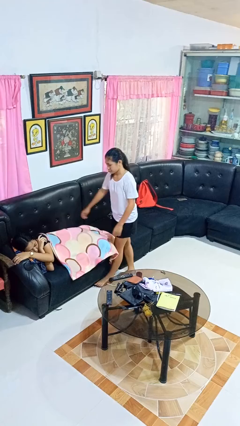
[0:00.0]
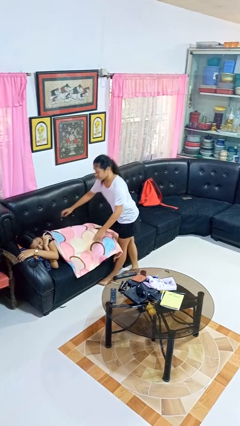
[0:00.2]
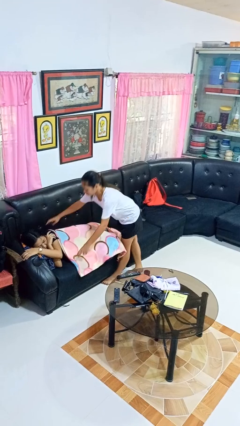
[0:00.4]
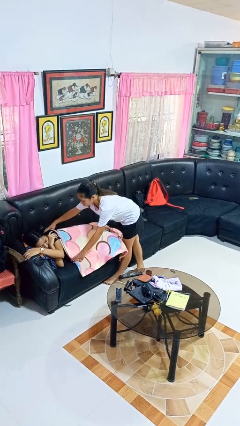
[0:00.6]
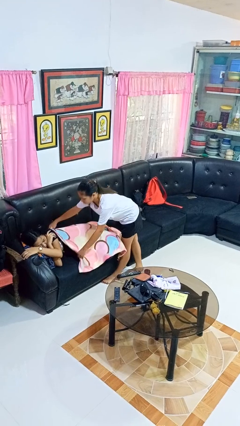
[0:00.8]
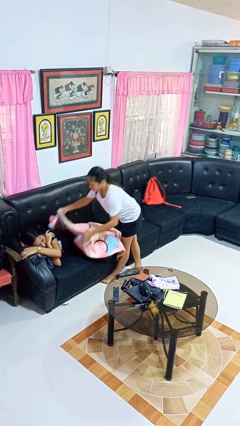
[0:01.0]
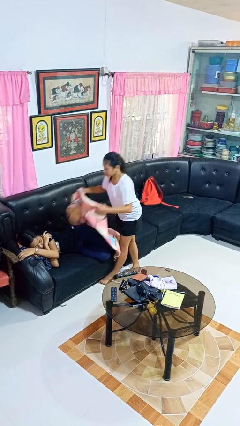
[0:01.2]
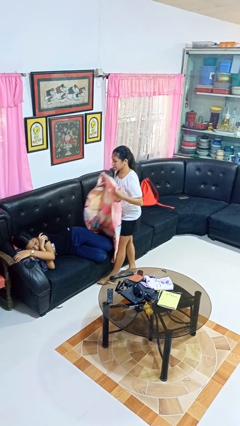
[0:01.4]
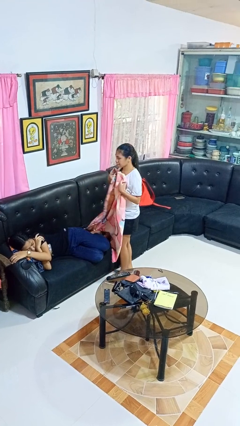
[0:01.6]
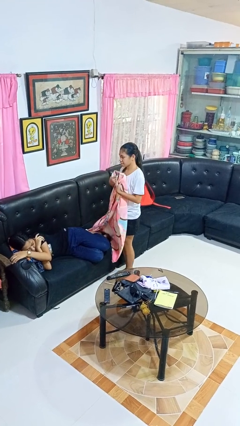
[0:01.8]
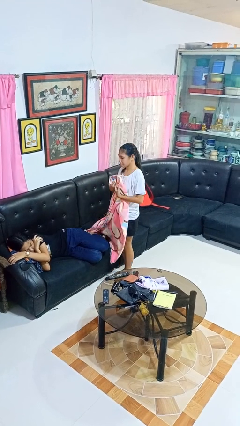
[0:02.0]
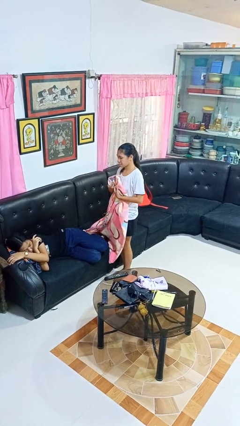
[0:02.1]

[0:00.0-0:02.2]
person uncovers friend with blanket

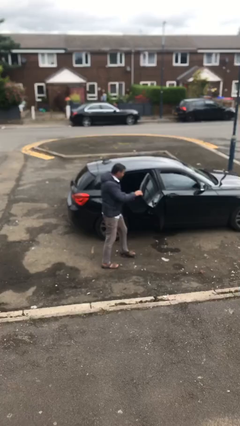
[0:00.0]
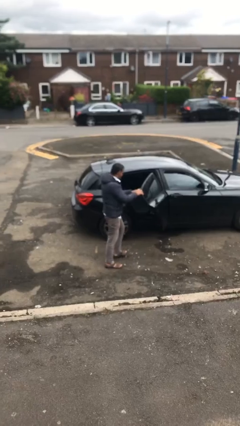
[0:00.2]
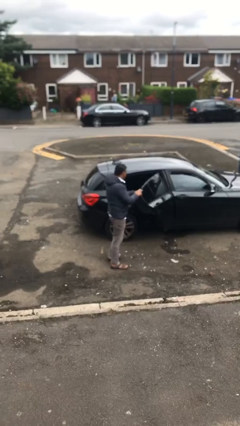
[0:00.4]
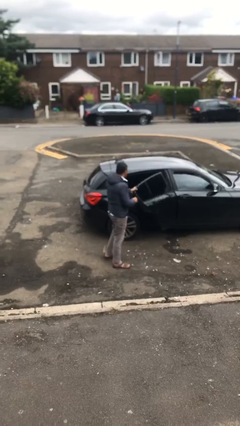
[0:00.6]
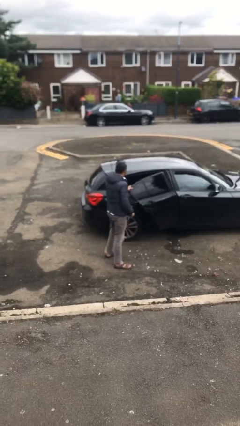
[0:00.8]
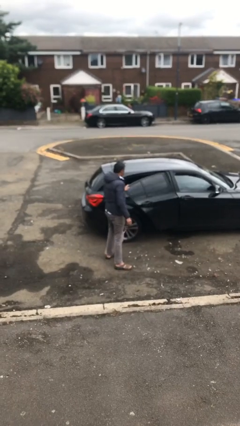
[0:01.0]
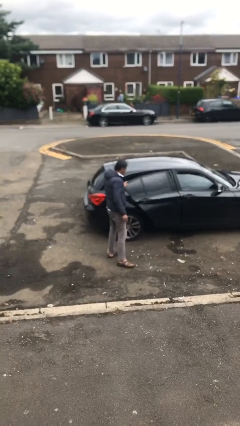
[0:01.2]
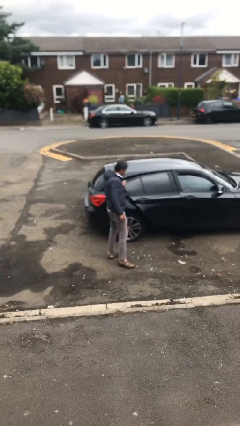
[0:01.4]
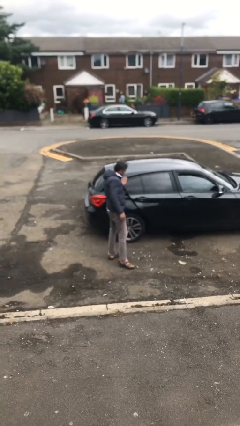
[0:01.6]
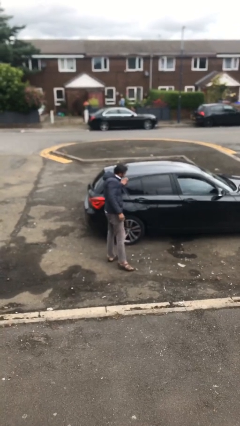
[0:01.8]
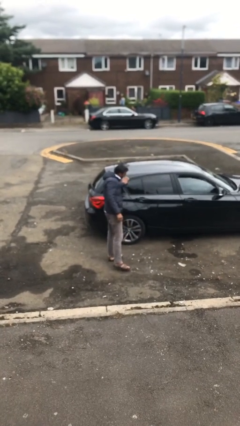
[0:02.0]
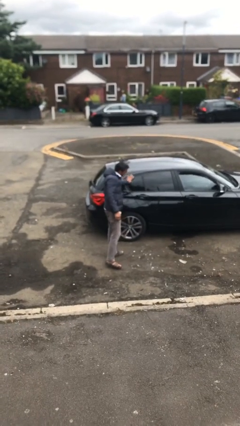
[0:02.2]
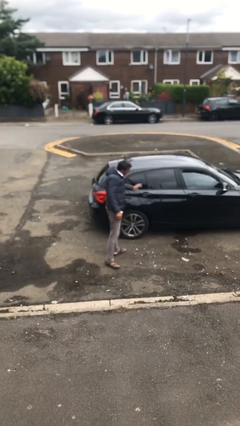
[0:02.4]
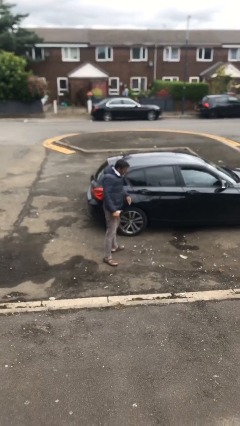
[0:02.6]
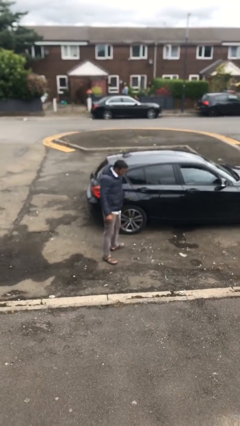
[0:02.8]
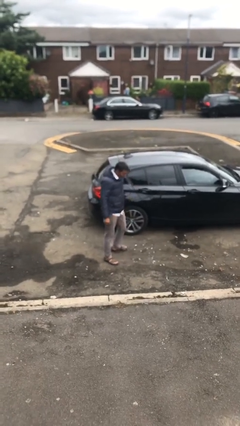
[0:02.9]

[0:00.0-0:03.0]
person closes car door

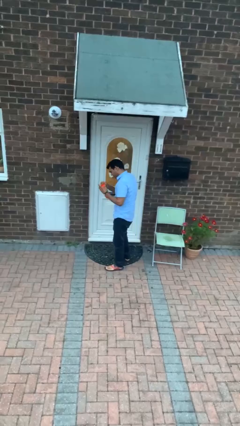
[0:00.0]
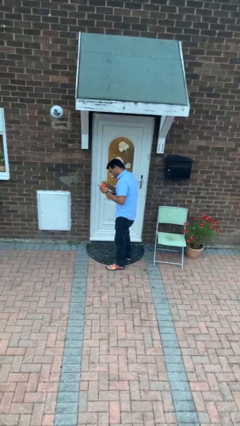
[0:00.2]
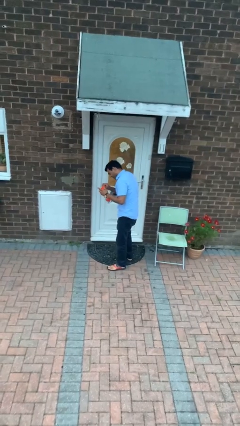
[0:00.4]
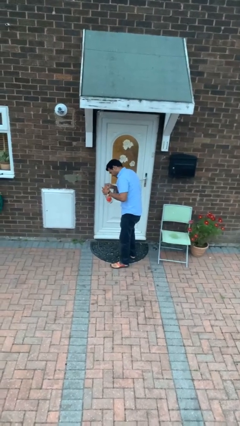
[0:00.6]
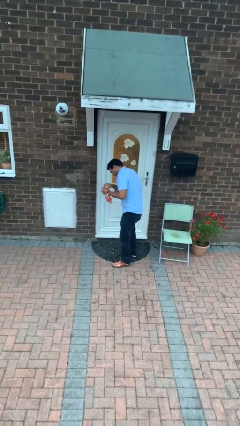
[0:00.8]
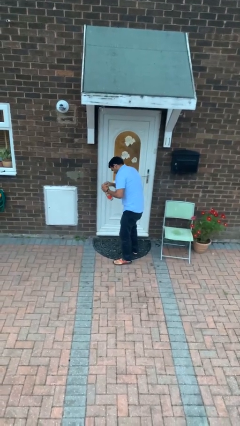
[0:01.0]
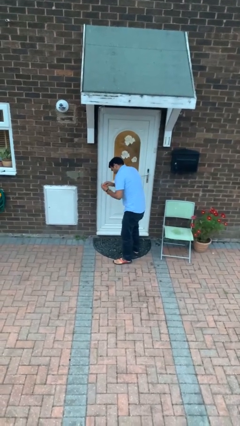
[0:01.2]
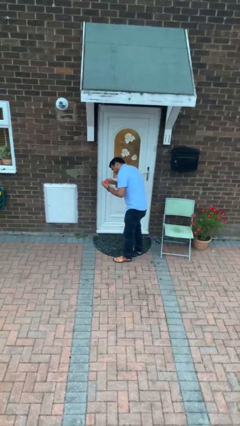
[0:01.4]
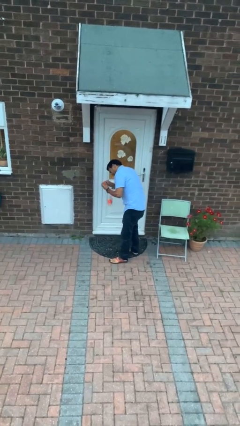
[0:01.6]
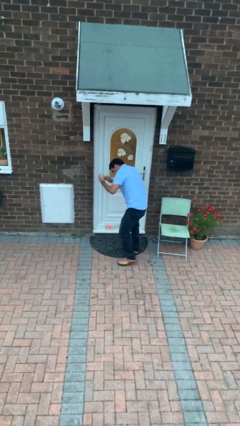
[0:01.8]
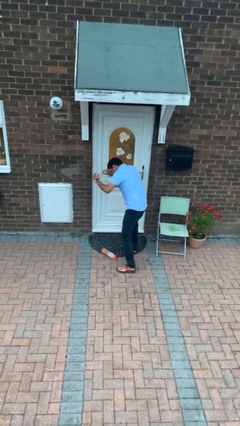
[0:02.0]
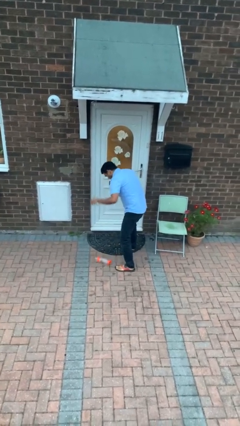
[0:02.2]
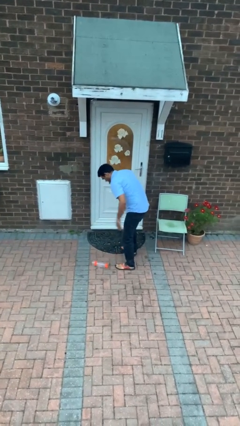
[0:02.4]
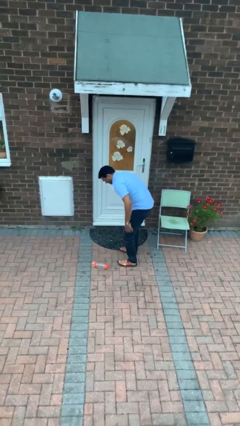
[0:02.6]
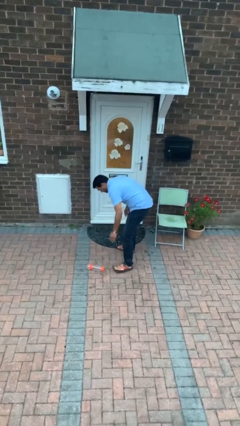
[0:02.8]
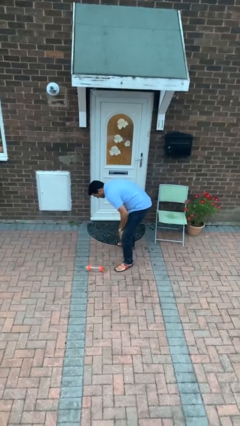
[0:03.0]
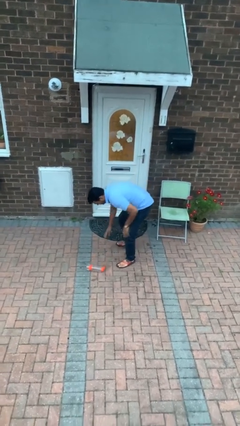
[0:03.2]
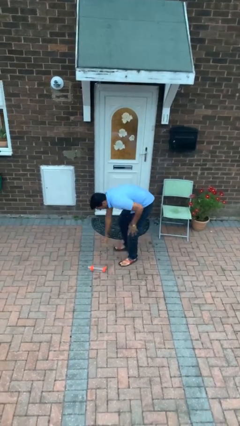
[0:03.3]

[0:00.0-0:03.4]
person drops object

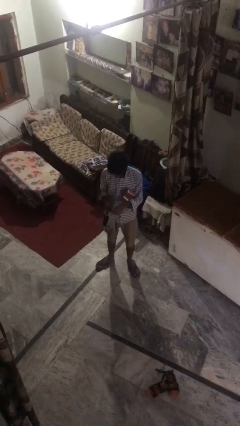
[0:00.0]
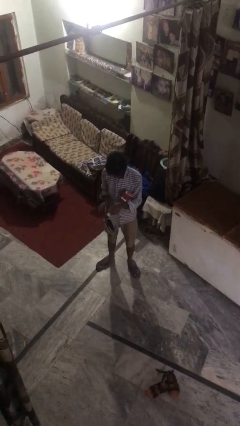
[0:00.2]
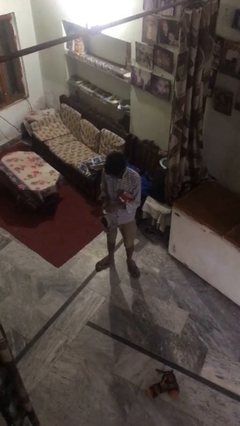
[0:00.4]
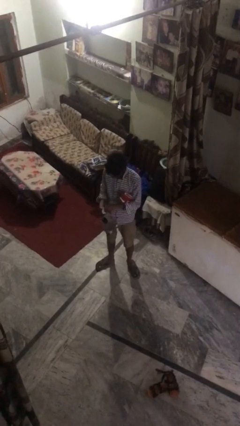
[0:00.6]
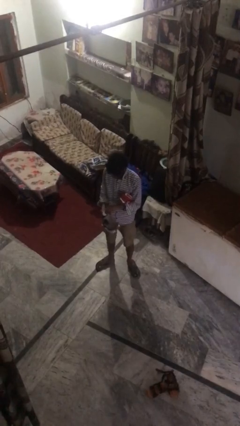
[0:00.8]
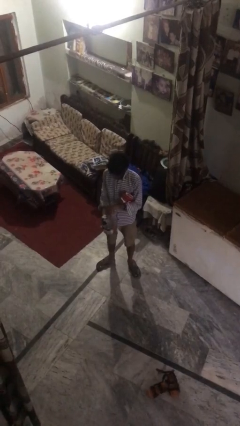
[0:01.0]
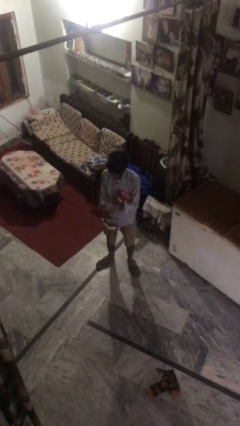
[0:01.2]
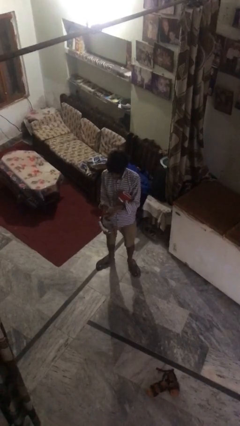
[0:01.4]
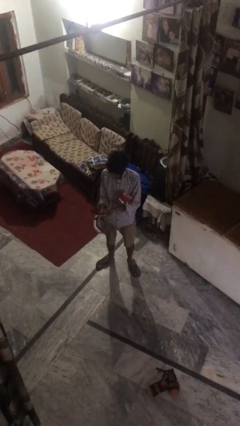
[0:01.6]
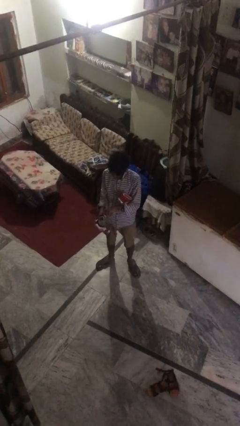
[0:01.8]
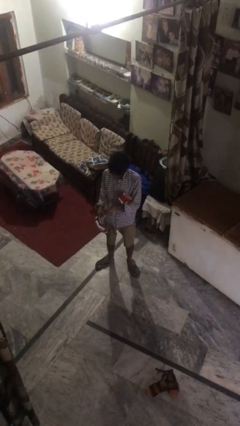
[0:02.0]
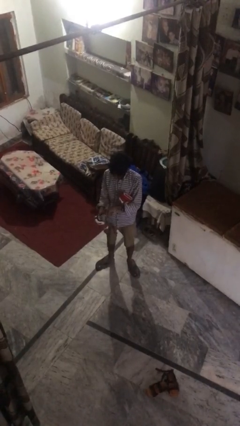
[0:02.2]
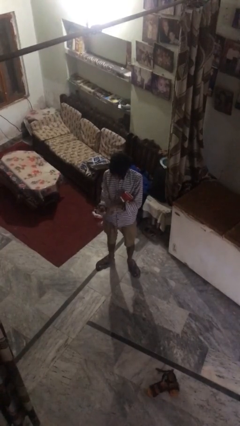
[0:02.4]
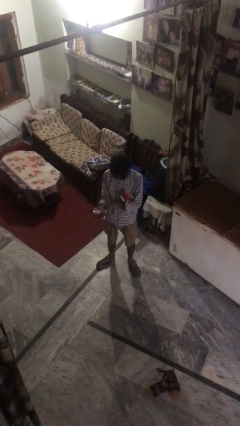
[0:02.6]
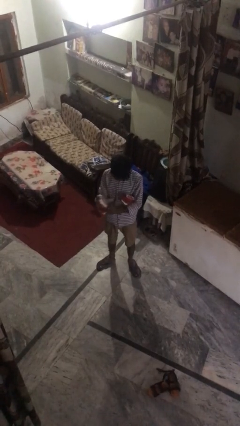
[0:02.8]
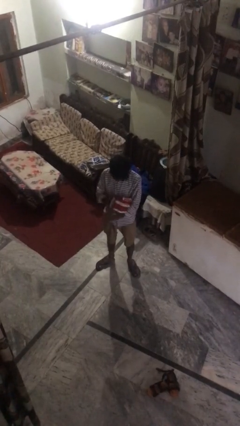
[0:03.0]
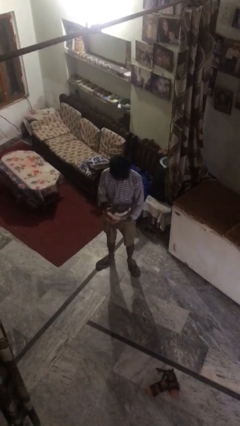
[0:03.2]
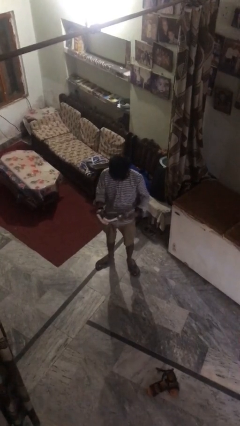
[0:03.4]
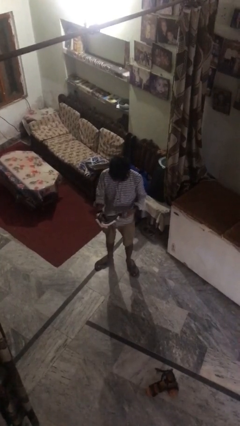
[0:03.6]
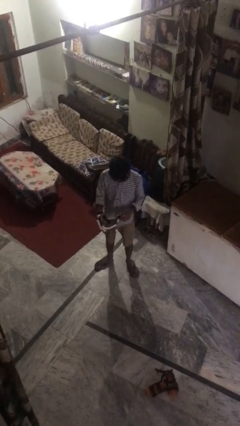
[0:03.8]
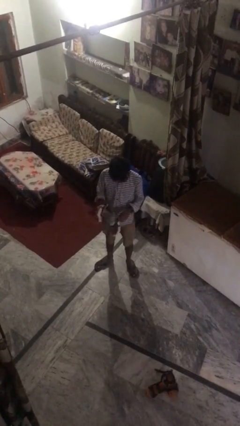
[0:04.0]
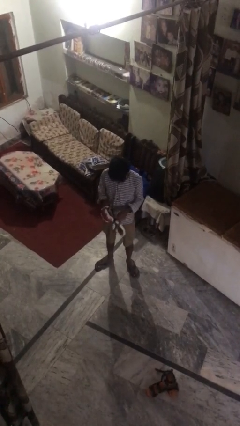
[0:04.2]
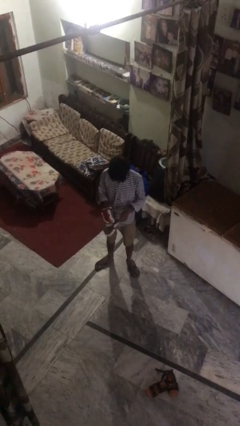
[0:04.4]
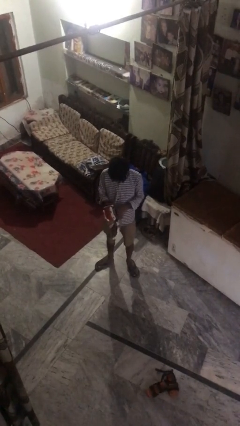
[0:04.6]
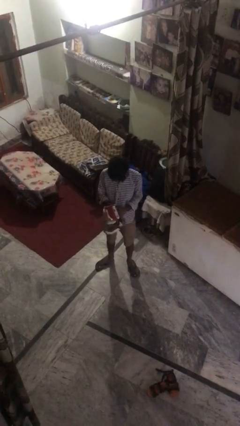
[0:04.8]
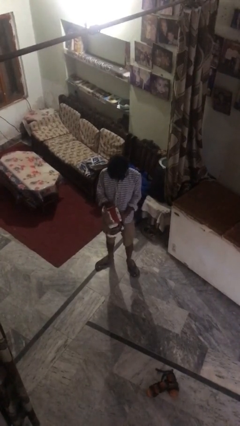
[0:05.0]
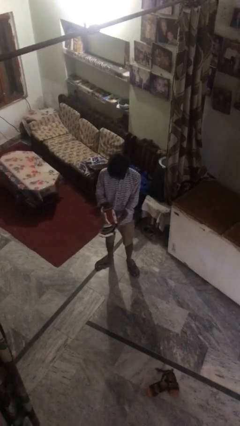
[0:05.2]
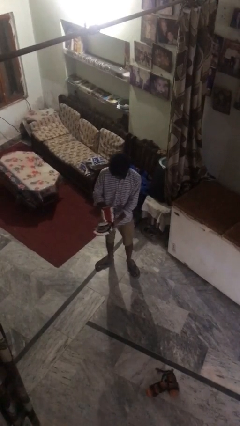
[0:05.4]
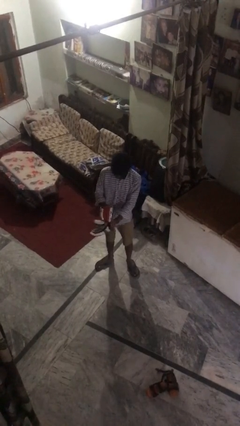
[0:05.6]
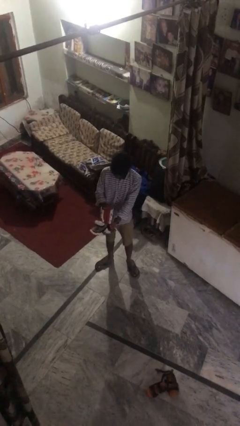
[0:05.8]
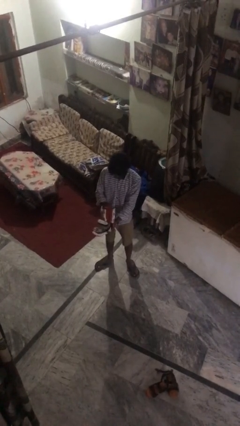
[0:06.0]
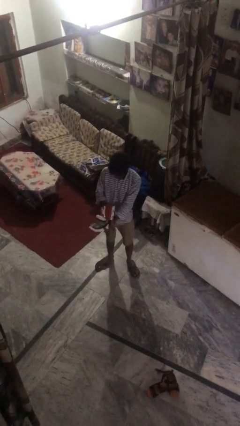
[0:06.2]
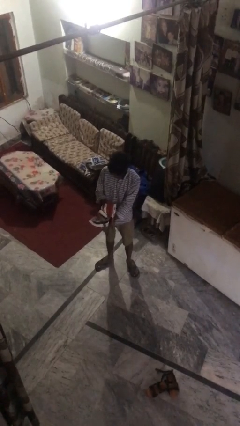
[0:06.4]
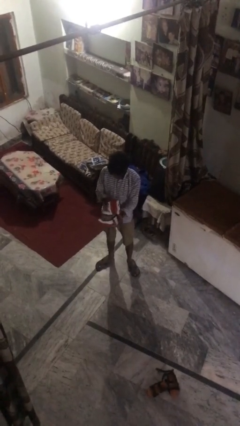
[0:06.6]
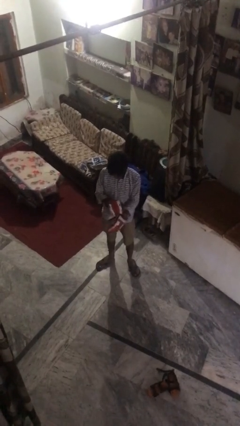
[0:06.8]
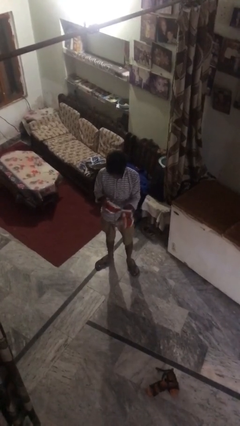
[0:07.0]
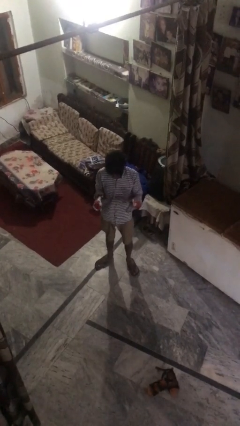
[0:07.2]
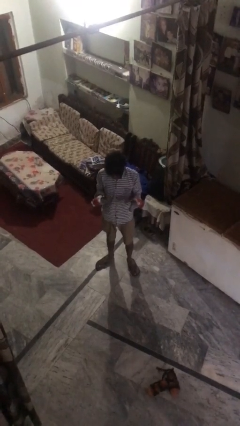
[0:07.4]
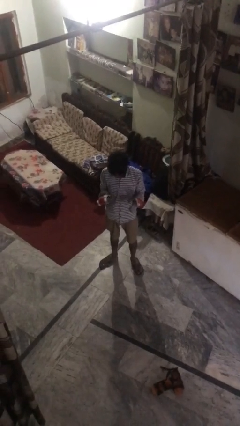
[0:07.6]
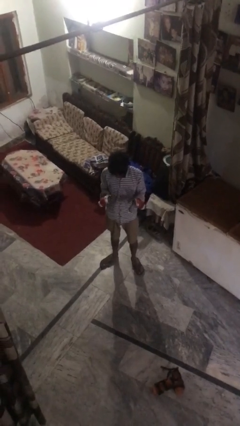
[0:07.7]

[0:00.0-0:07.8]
person puts on gloves

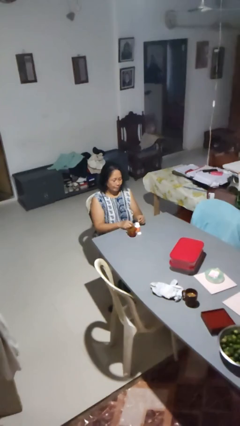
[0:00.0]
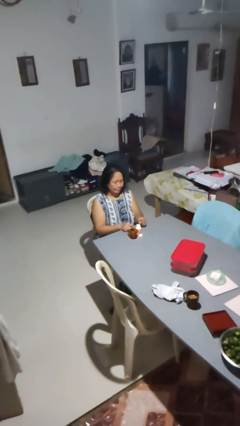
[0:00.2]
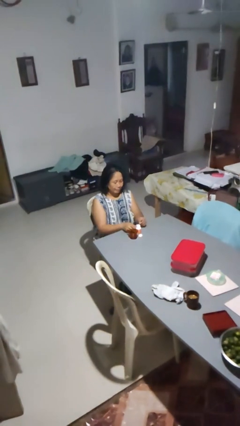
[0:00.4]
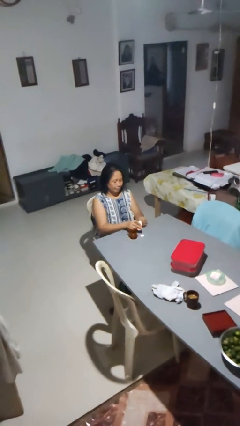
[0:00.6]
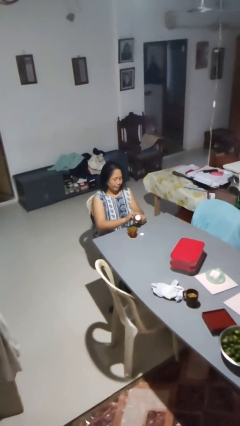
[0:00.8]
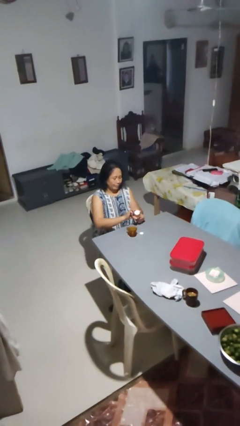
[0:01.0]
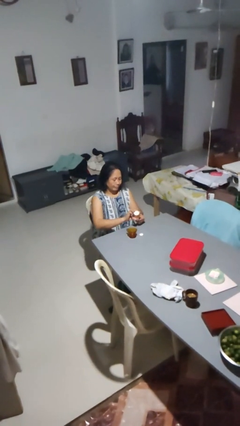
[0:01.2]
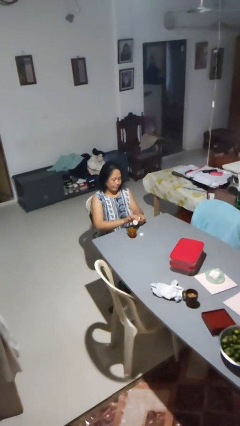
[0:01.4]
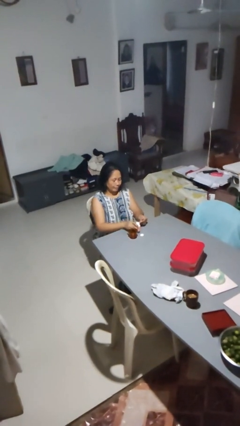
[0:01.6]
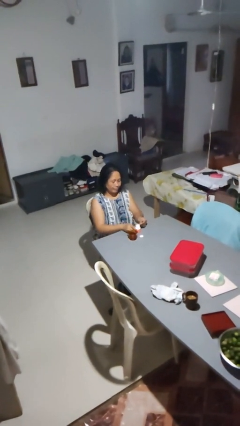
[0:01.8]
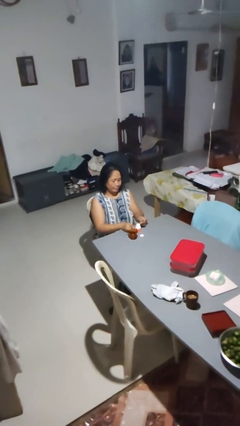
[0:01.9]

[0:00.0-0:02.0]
person takes medicine pills
